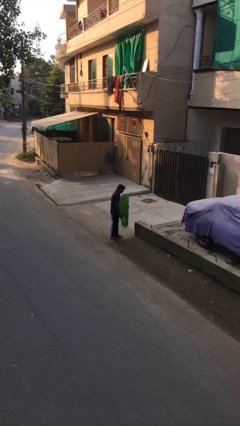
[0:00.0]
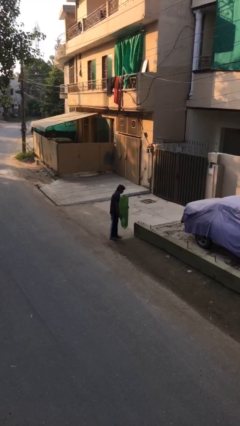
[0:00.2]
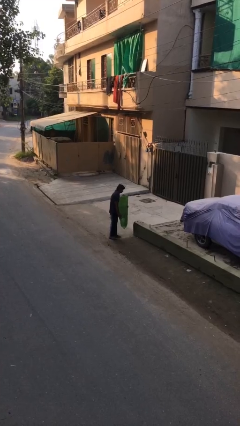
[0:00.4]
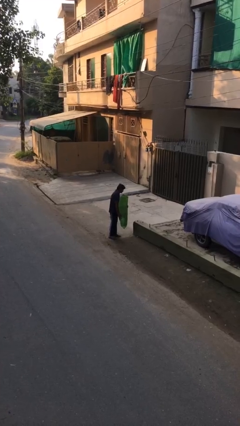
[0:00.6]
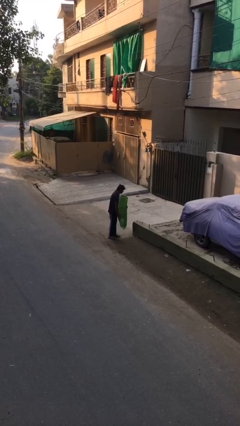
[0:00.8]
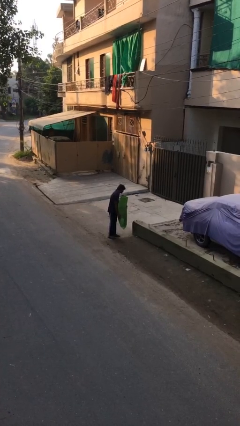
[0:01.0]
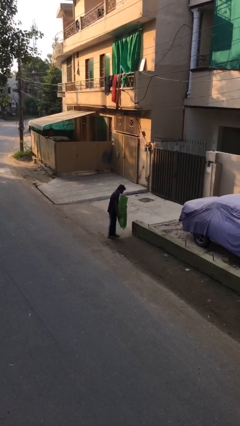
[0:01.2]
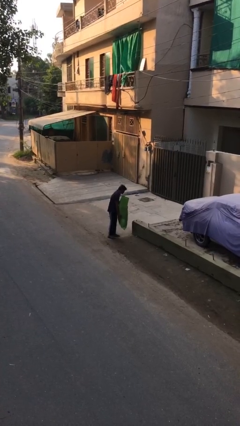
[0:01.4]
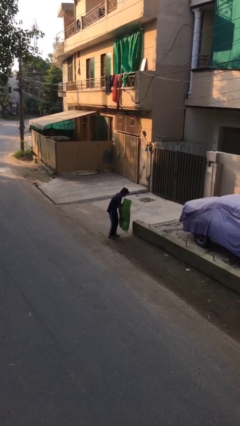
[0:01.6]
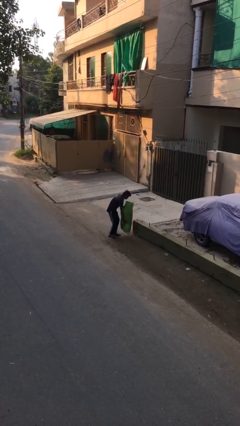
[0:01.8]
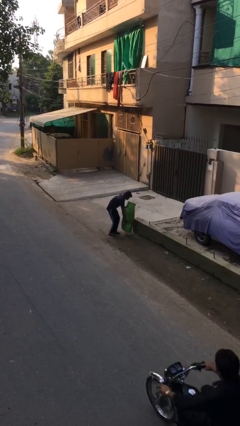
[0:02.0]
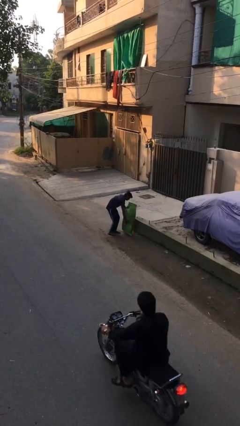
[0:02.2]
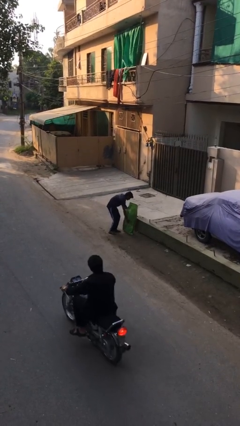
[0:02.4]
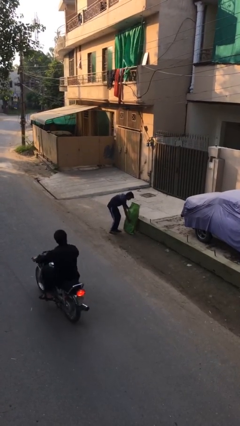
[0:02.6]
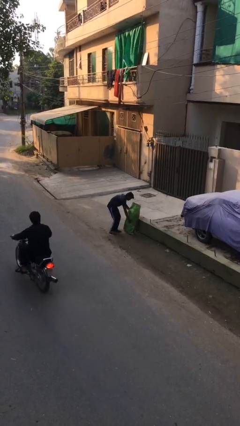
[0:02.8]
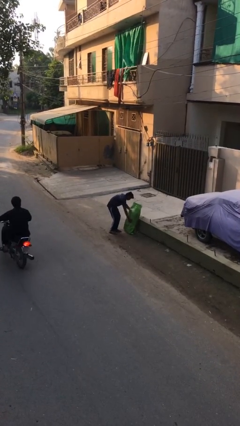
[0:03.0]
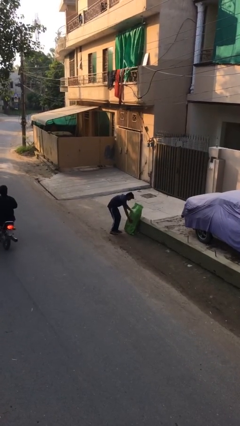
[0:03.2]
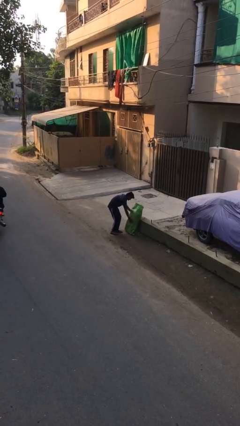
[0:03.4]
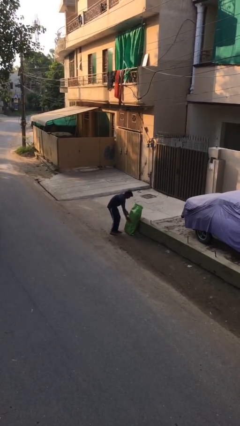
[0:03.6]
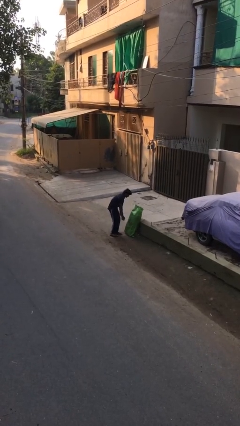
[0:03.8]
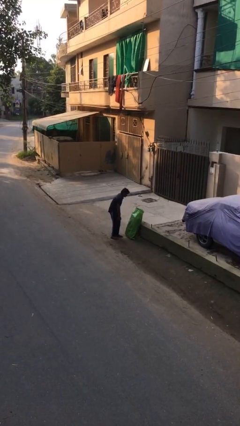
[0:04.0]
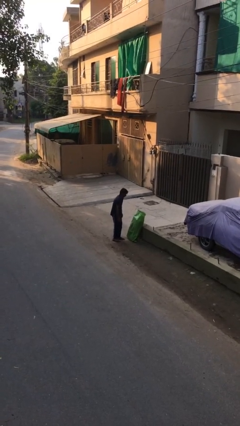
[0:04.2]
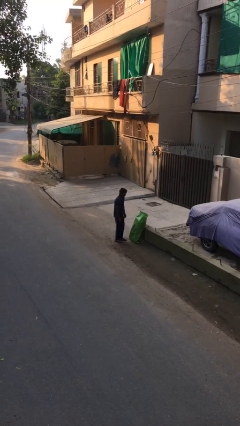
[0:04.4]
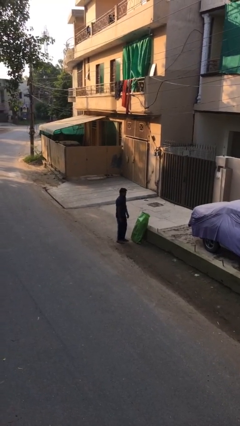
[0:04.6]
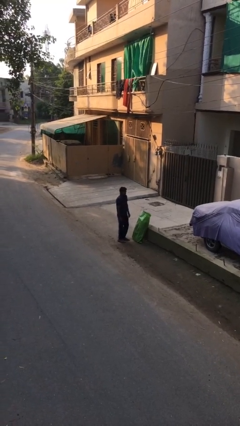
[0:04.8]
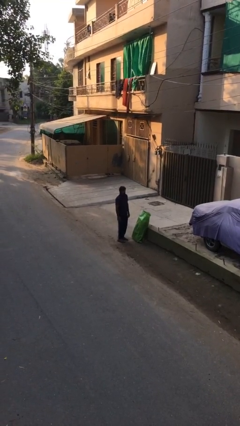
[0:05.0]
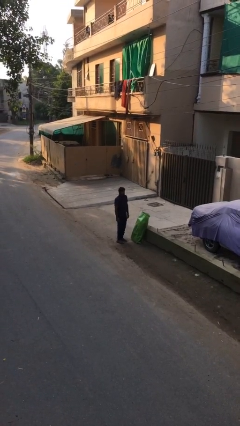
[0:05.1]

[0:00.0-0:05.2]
person puts down object on floor

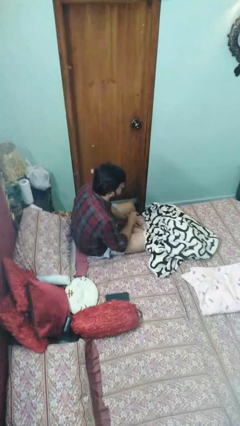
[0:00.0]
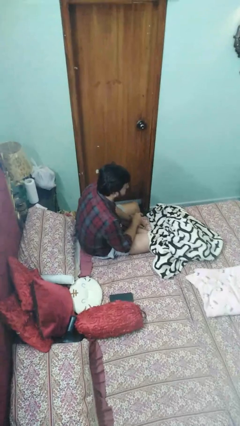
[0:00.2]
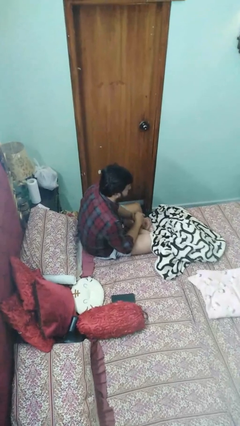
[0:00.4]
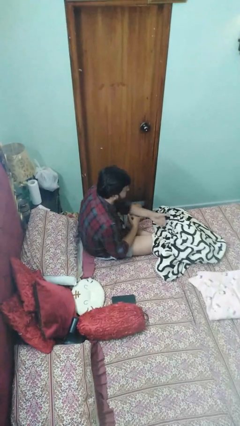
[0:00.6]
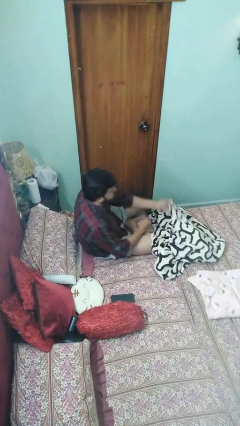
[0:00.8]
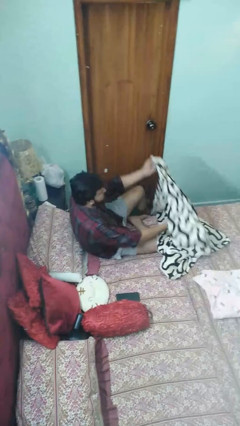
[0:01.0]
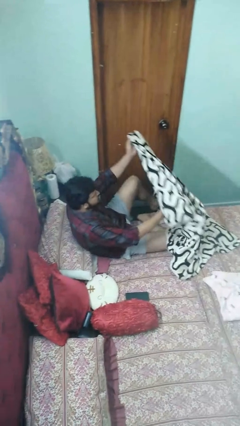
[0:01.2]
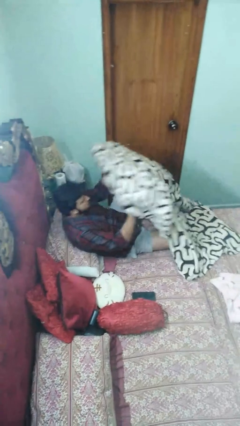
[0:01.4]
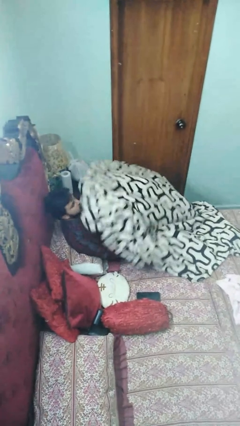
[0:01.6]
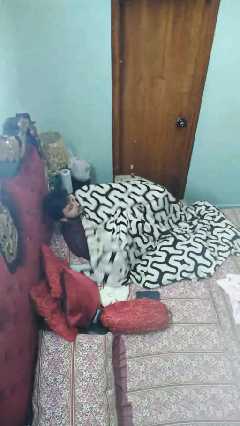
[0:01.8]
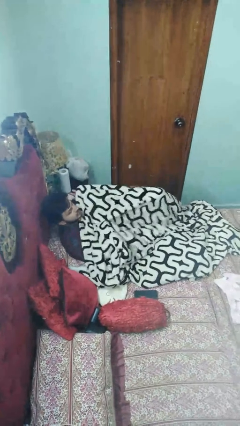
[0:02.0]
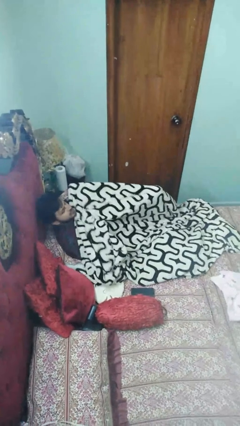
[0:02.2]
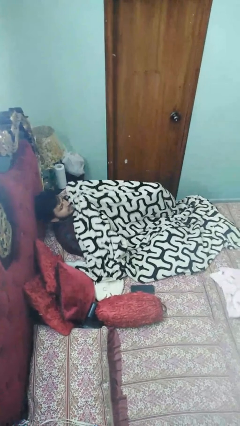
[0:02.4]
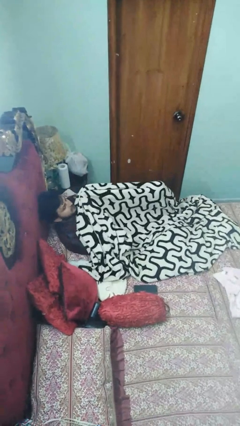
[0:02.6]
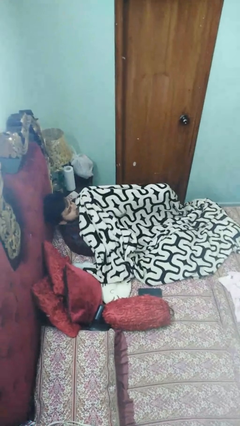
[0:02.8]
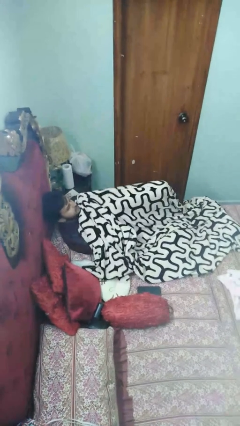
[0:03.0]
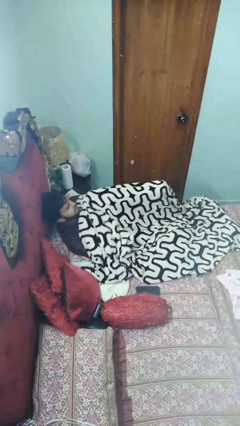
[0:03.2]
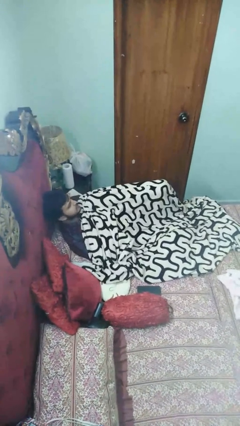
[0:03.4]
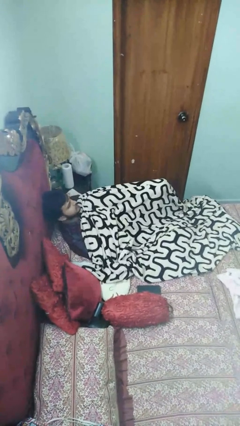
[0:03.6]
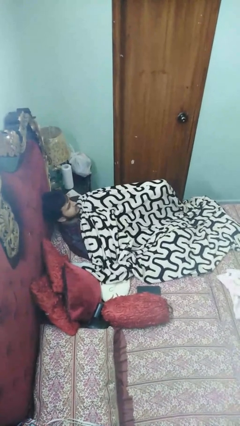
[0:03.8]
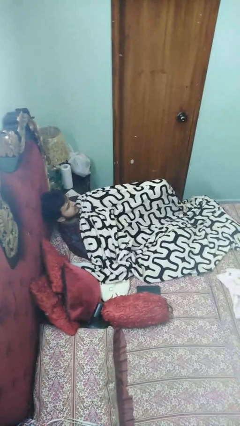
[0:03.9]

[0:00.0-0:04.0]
person covers with blanket

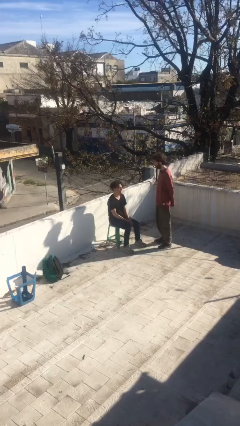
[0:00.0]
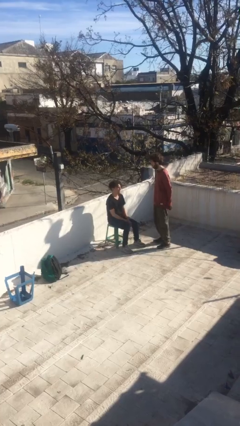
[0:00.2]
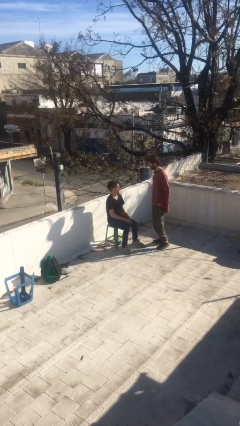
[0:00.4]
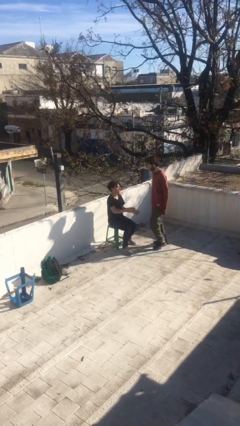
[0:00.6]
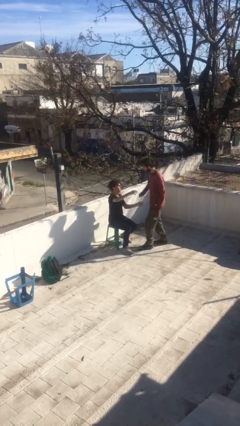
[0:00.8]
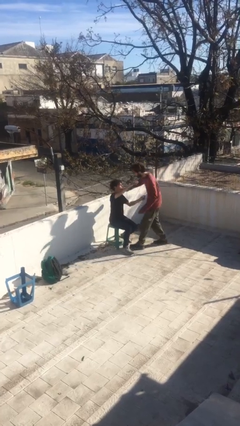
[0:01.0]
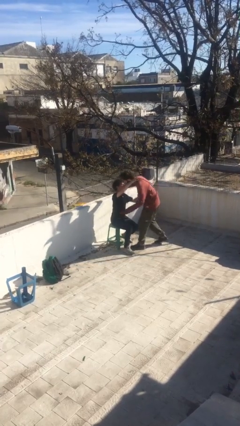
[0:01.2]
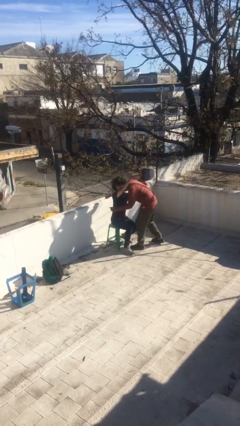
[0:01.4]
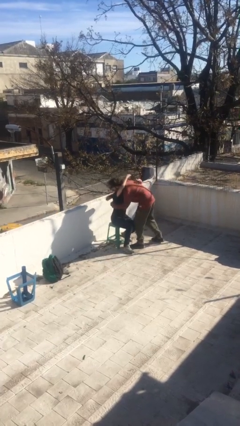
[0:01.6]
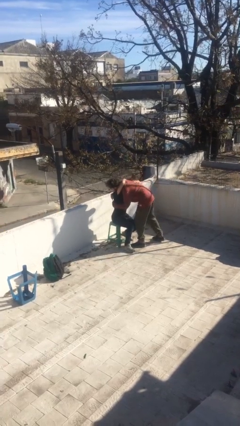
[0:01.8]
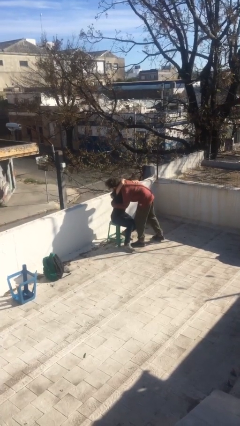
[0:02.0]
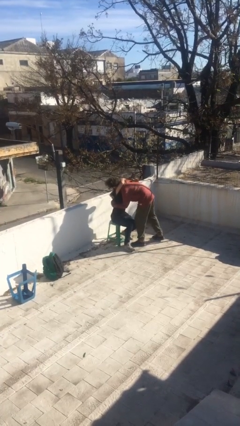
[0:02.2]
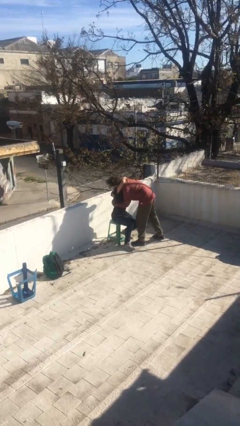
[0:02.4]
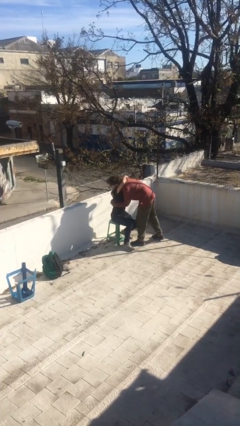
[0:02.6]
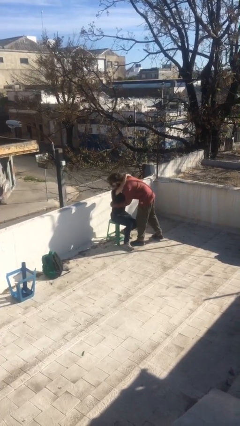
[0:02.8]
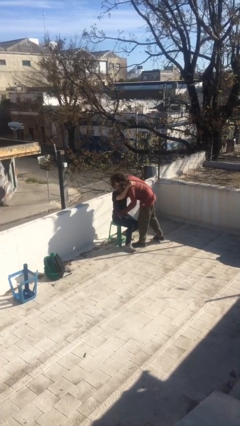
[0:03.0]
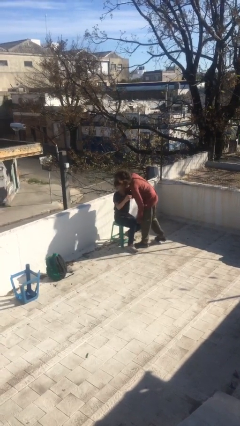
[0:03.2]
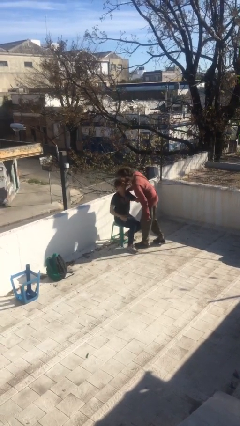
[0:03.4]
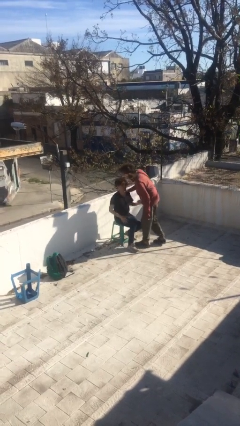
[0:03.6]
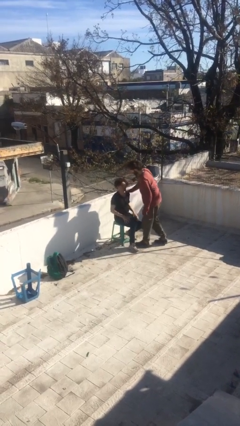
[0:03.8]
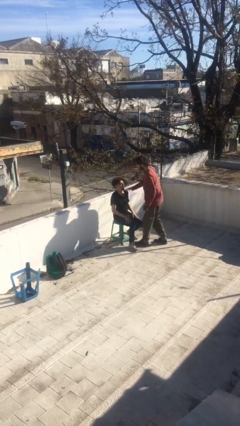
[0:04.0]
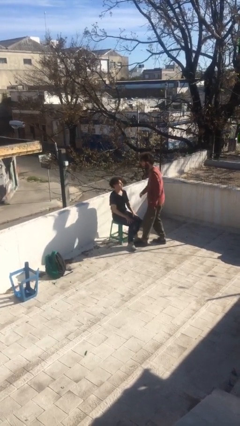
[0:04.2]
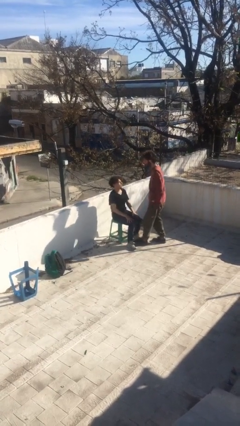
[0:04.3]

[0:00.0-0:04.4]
person embraces person

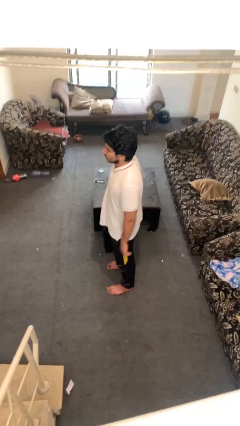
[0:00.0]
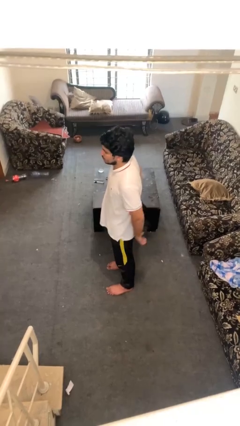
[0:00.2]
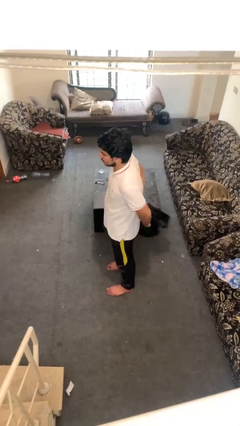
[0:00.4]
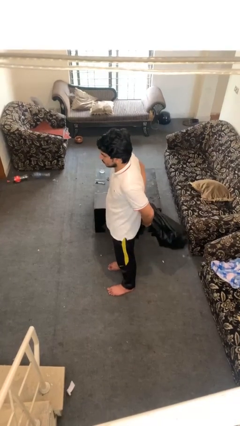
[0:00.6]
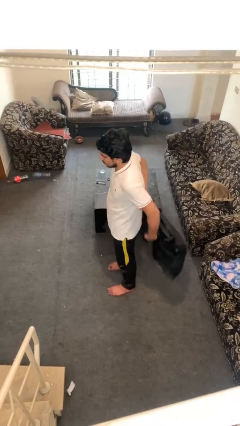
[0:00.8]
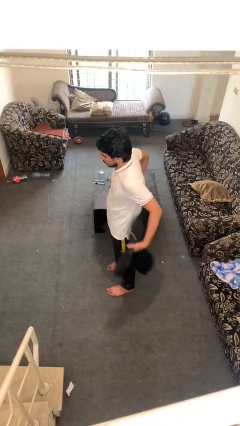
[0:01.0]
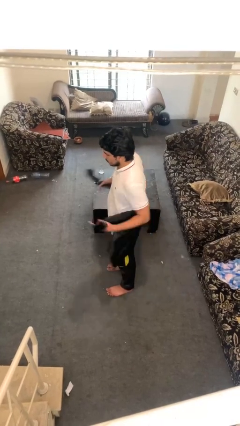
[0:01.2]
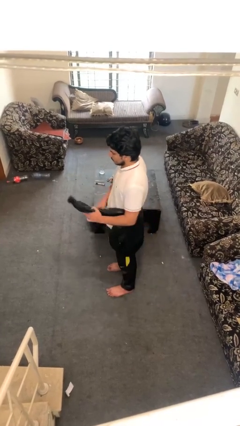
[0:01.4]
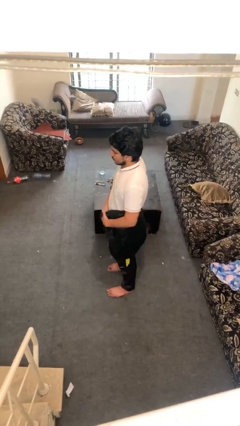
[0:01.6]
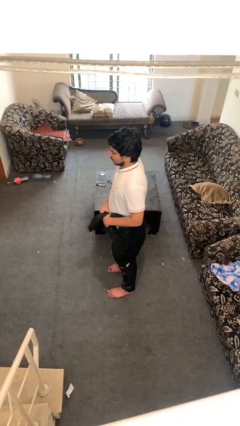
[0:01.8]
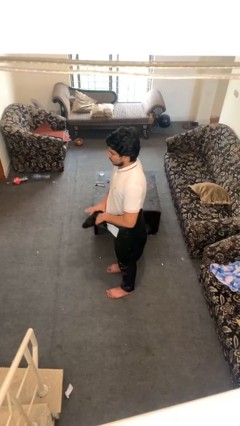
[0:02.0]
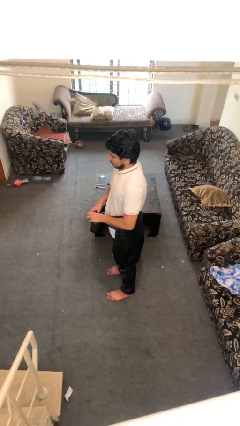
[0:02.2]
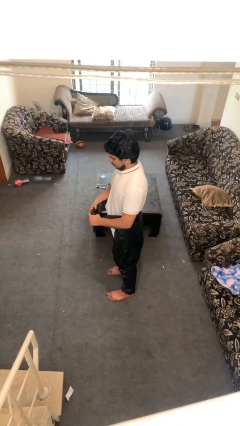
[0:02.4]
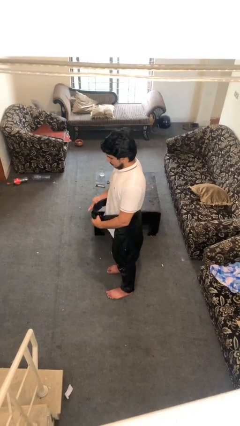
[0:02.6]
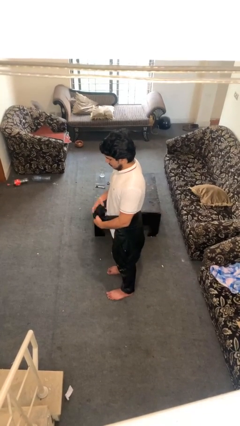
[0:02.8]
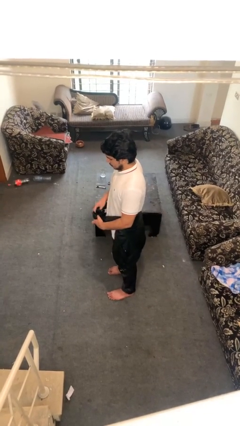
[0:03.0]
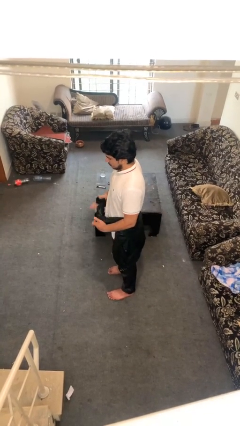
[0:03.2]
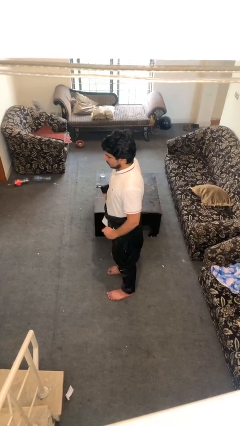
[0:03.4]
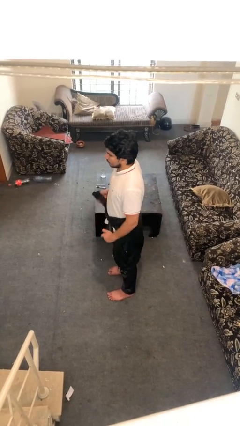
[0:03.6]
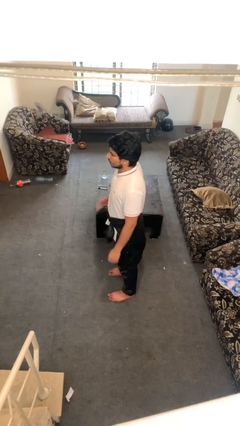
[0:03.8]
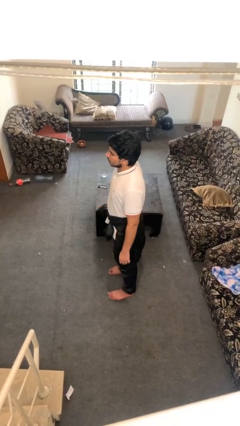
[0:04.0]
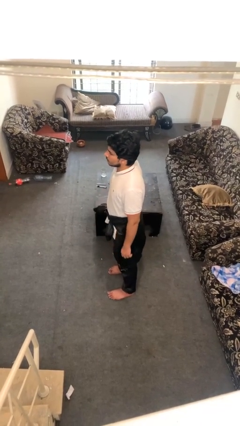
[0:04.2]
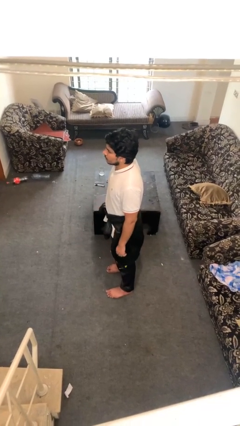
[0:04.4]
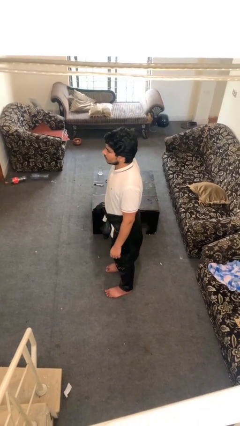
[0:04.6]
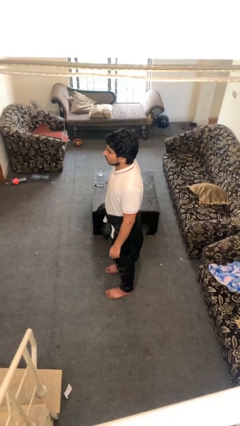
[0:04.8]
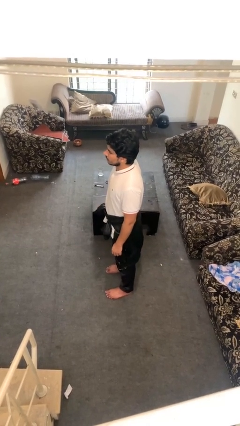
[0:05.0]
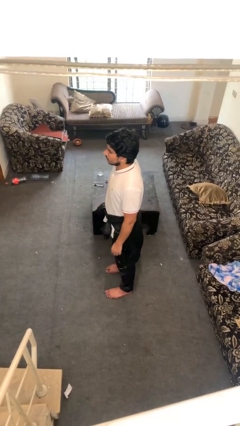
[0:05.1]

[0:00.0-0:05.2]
person ties jacket around waist
